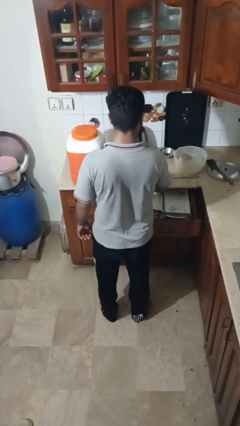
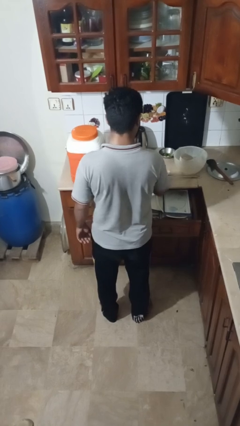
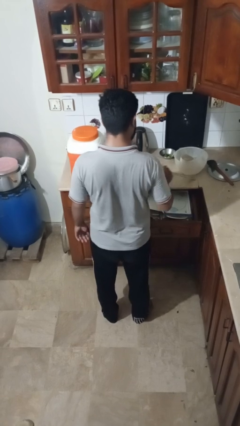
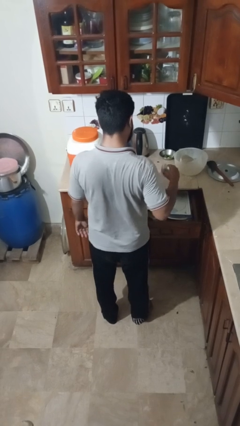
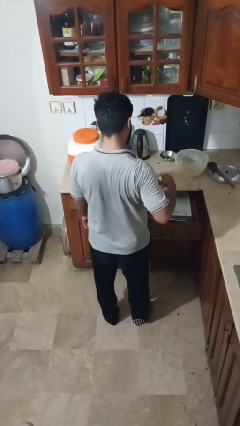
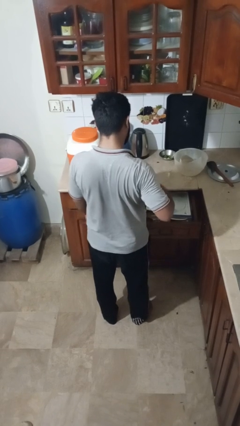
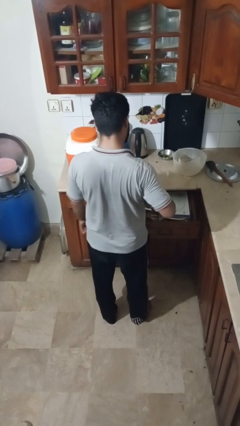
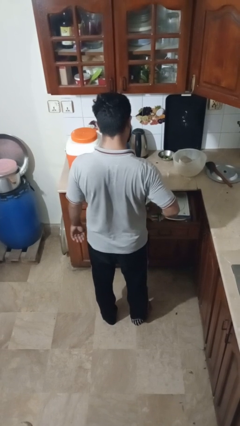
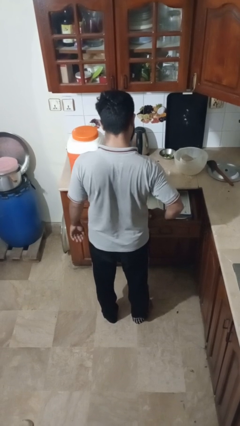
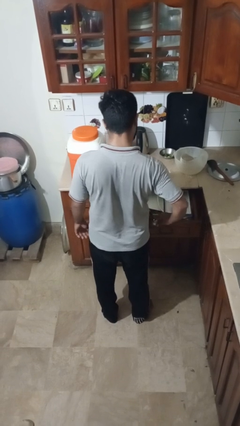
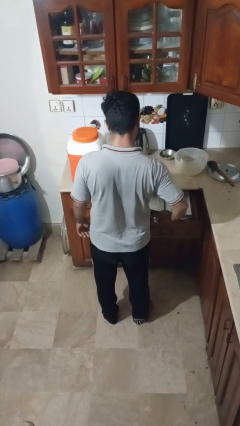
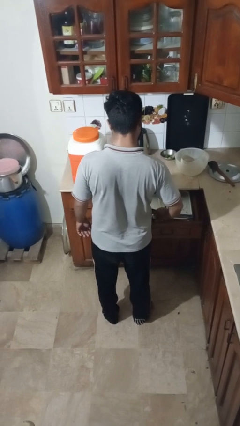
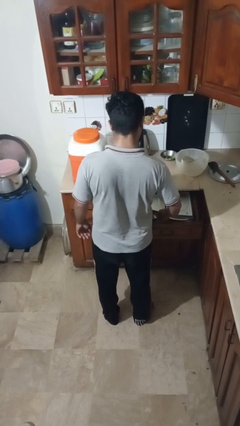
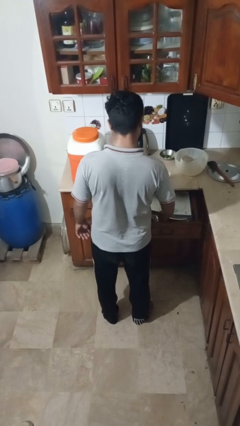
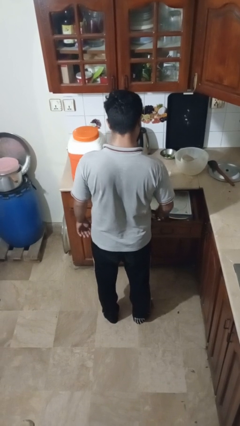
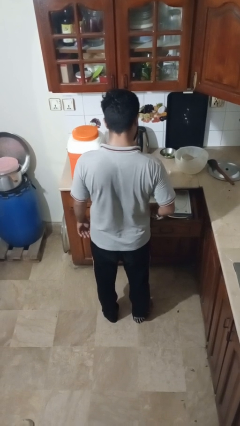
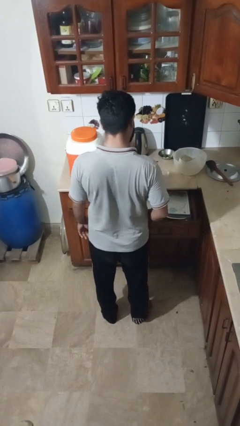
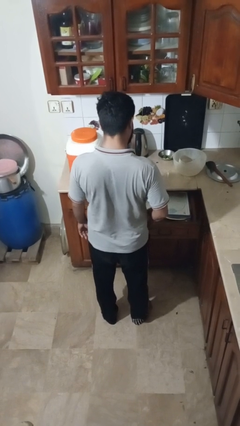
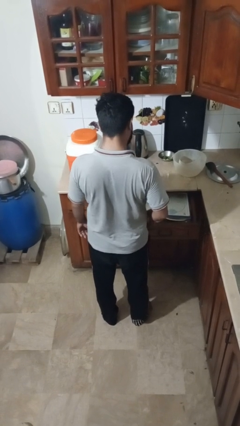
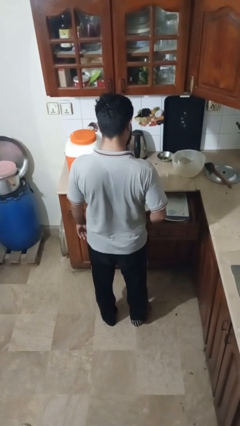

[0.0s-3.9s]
person puts object into kitchen drawer

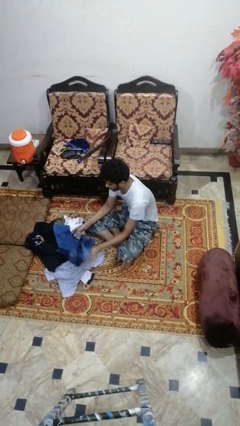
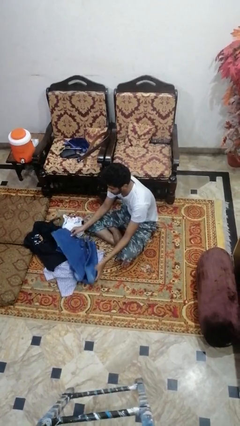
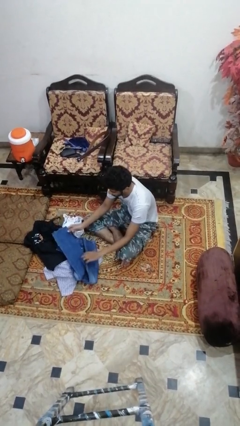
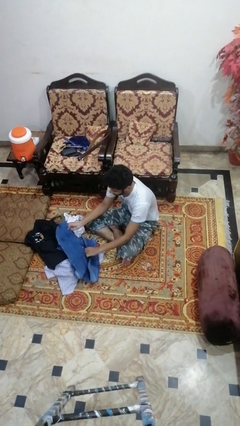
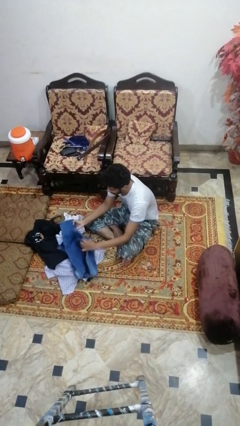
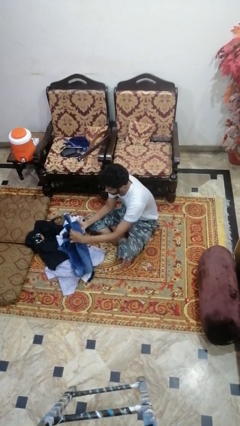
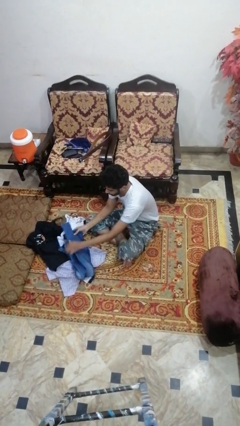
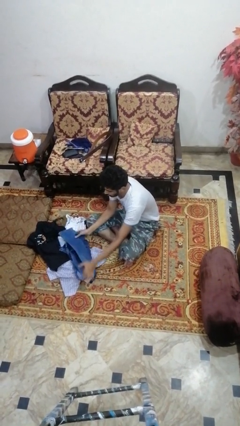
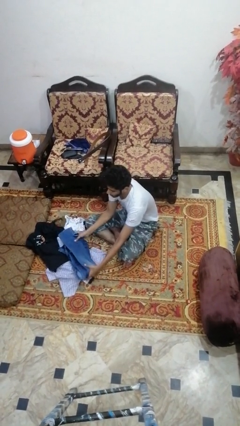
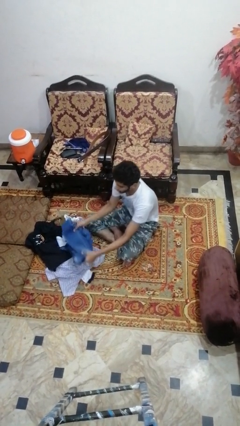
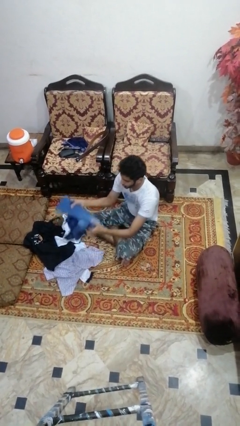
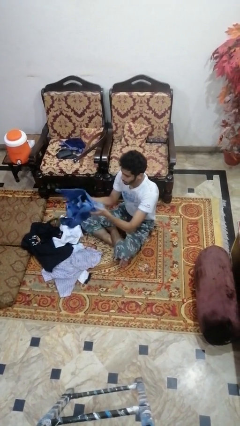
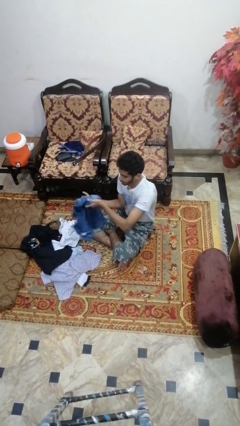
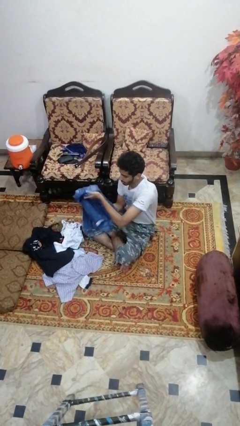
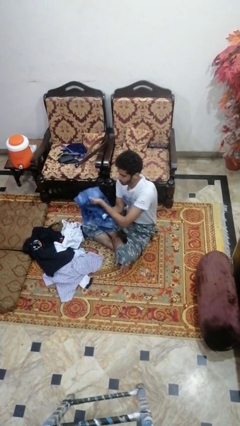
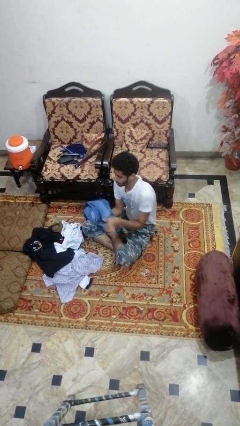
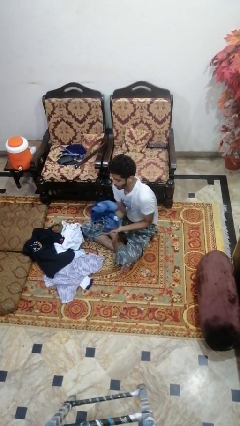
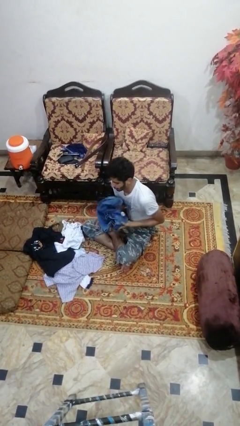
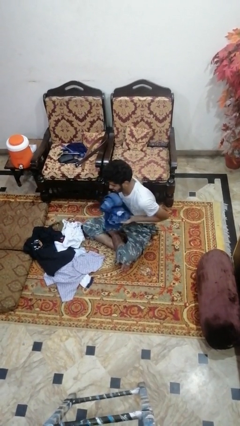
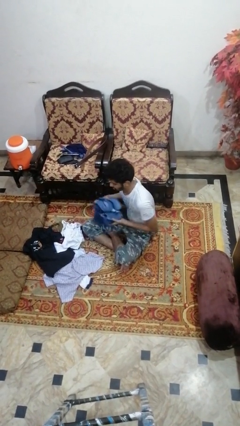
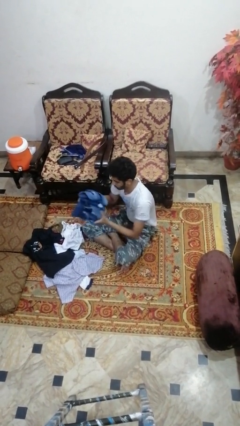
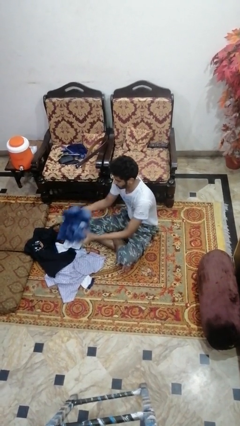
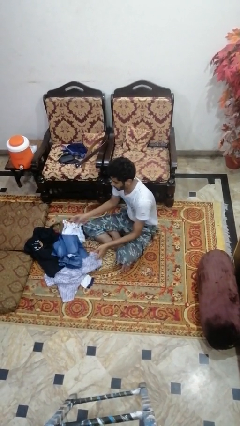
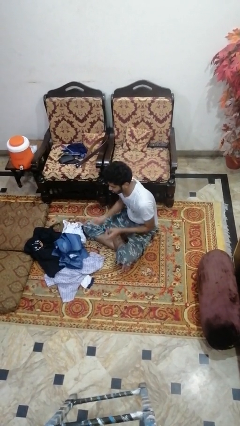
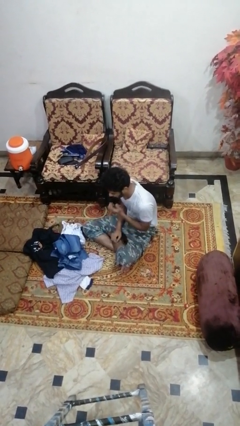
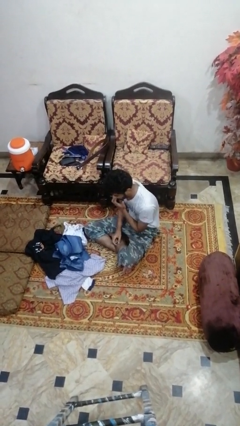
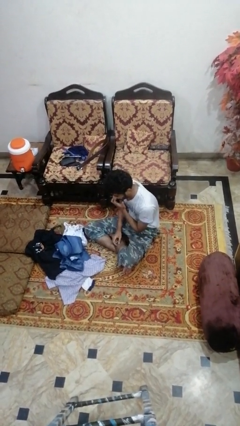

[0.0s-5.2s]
person folds pants

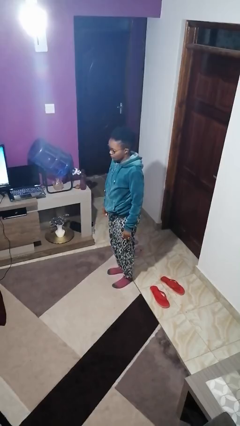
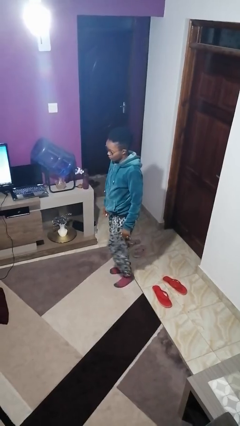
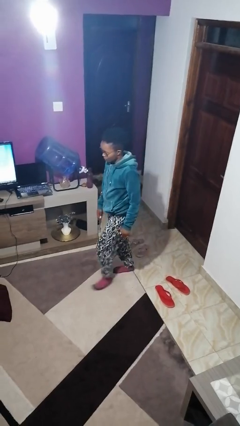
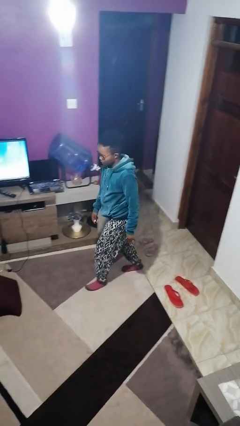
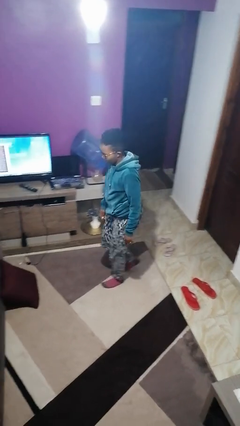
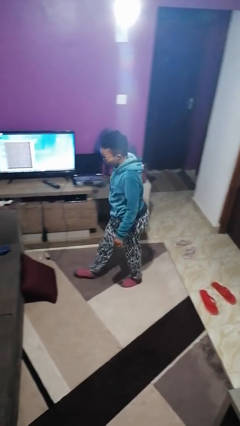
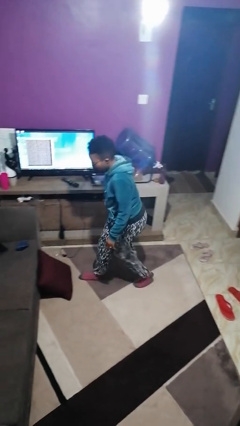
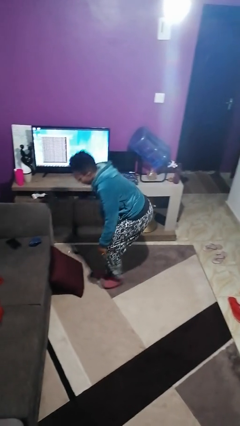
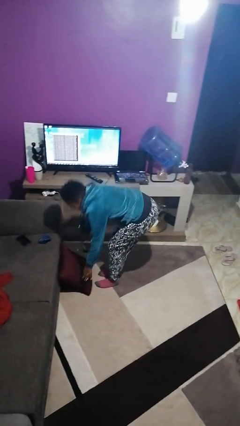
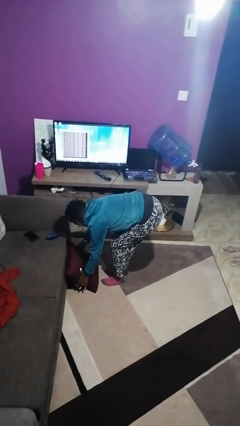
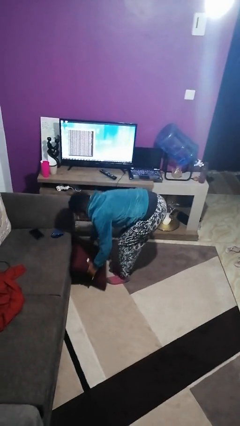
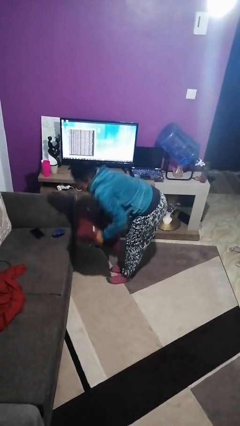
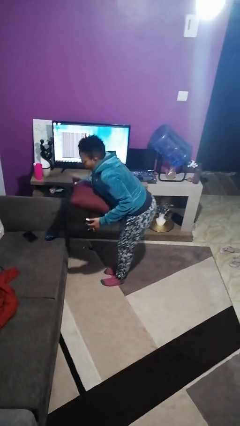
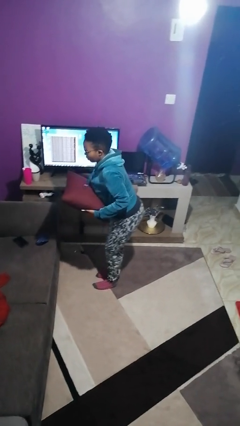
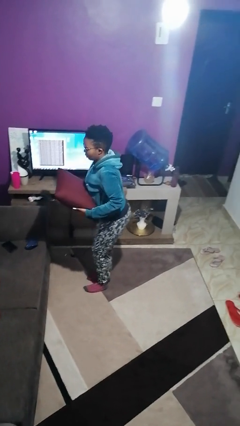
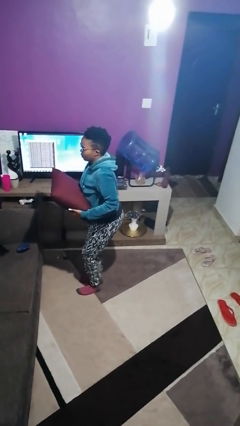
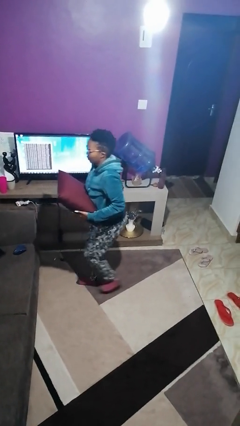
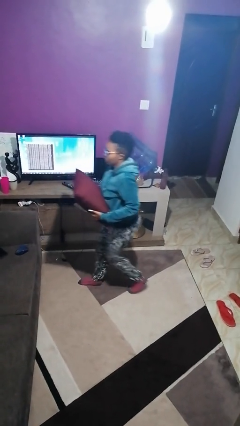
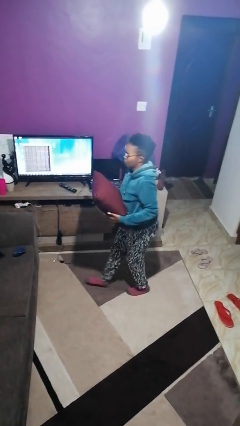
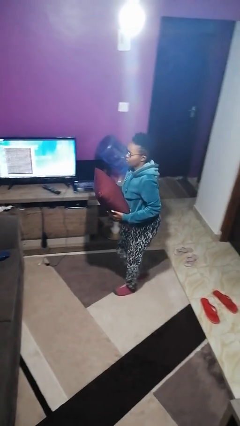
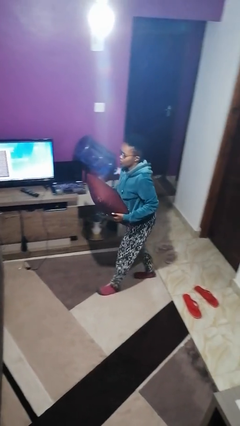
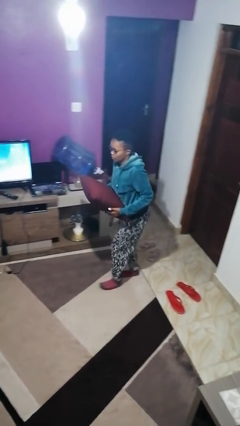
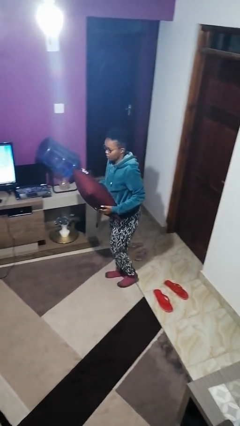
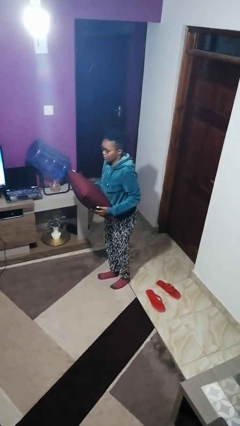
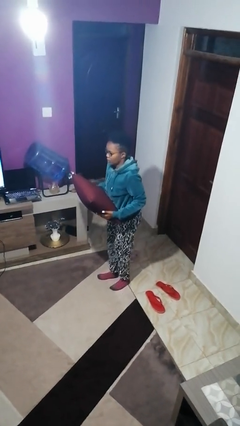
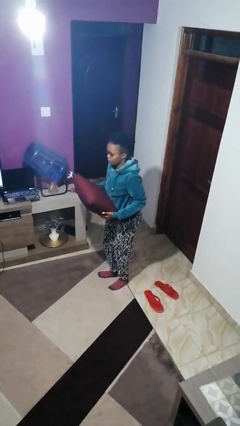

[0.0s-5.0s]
person picks up object from floor

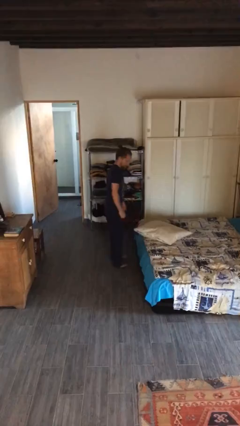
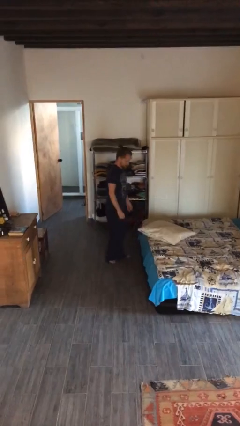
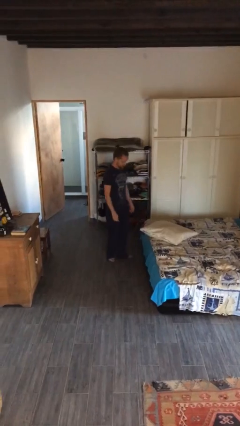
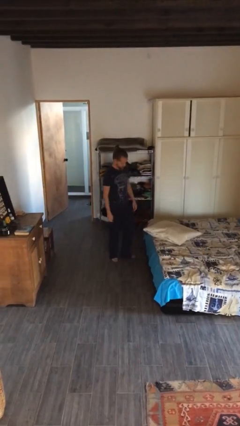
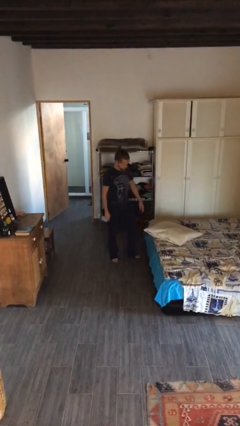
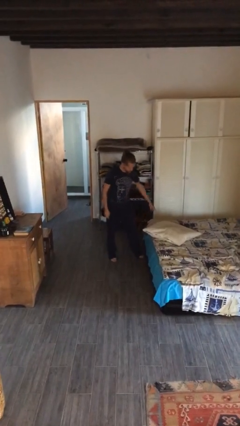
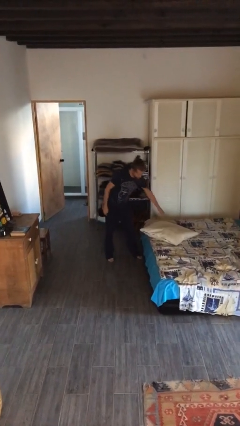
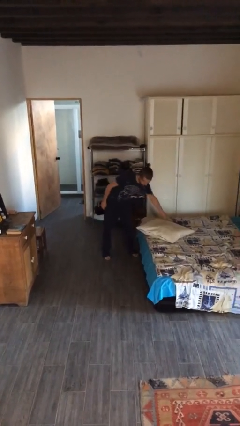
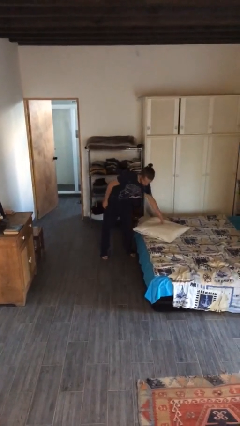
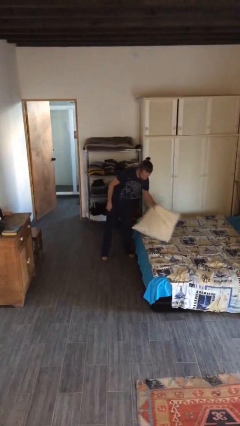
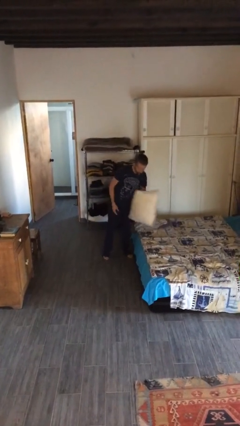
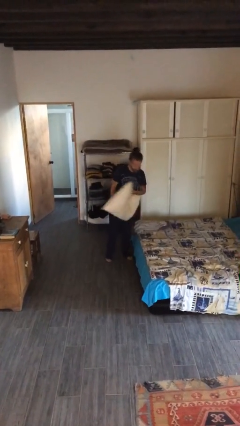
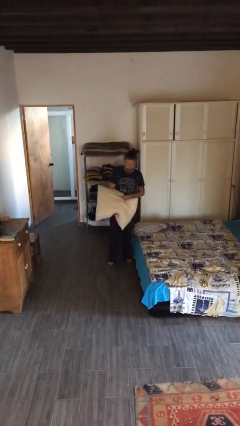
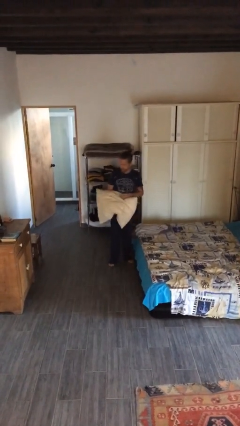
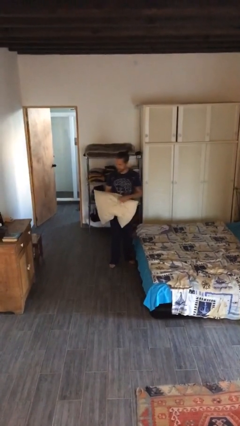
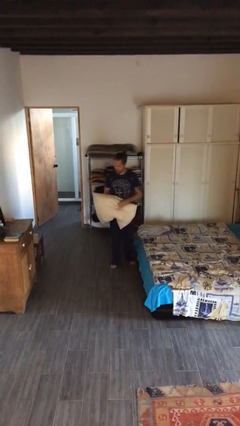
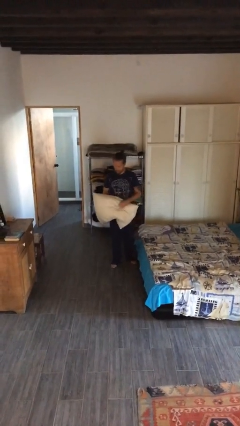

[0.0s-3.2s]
person picks up object from bed

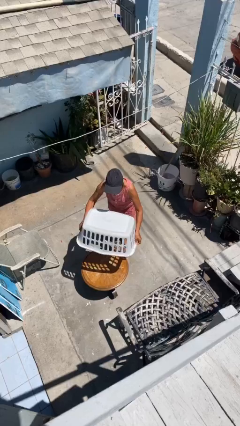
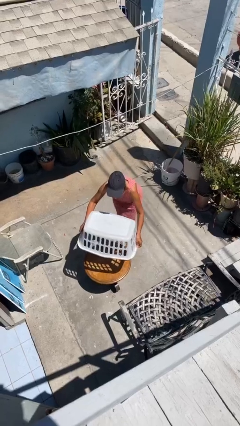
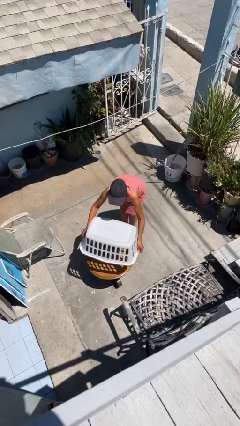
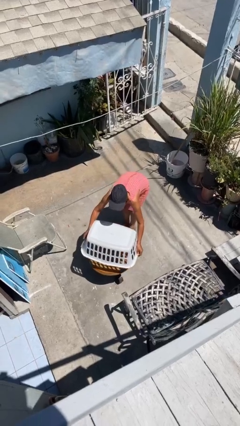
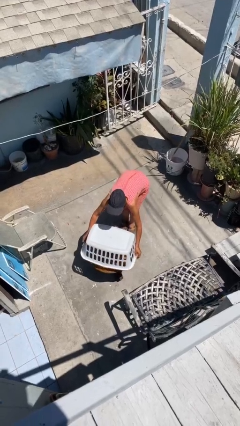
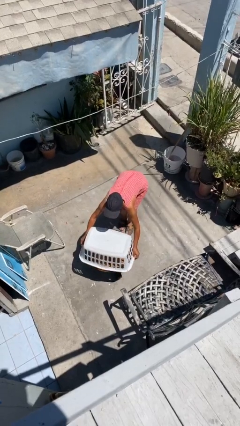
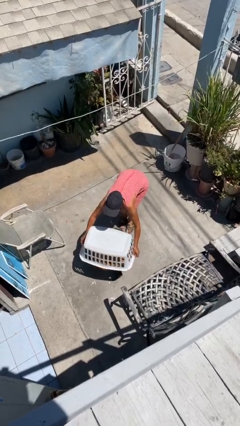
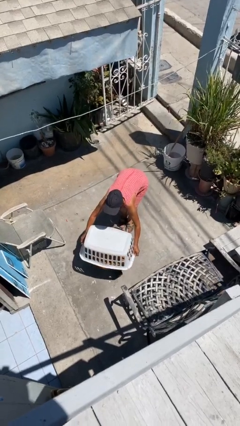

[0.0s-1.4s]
person puts down object on table
